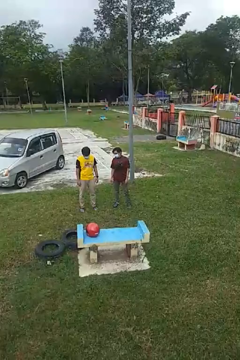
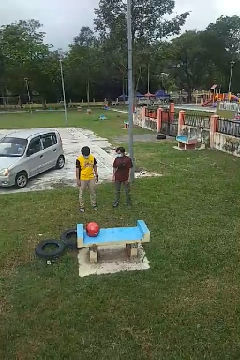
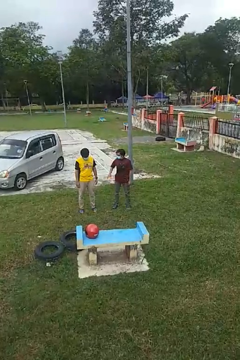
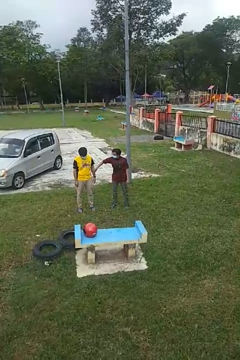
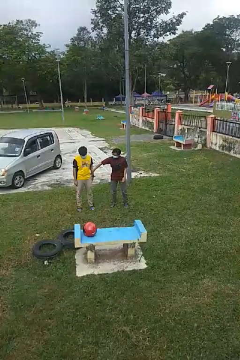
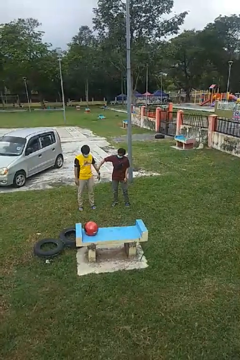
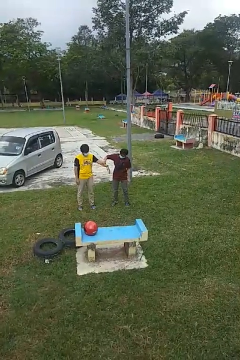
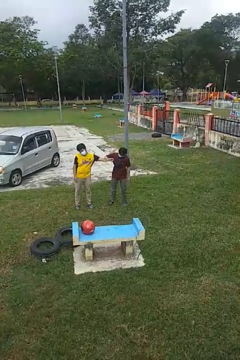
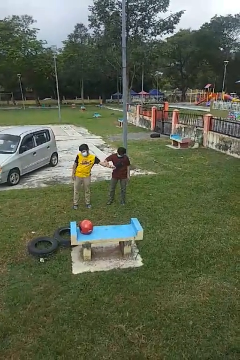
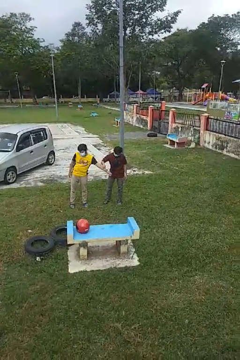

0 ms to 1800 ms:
person grabs person by forearm

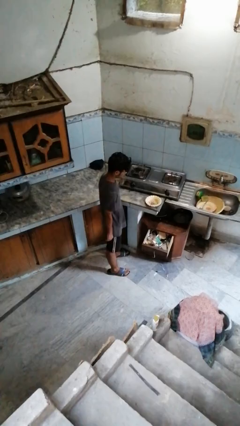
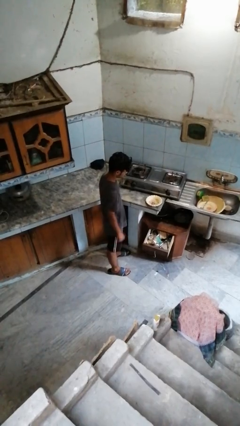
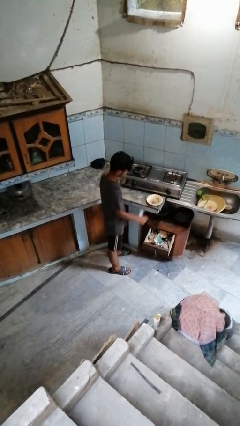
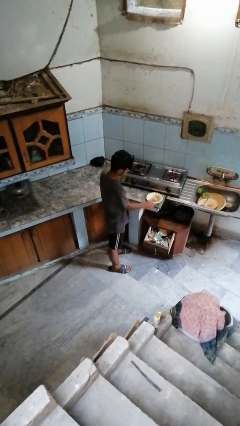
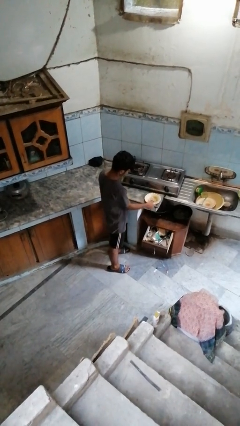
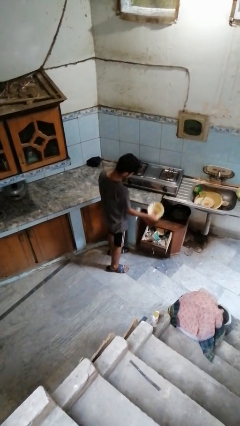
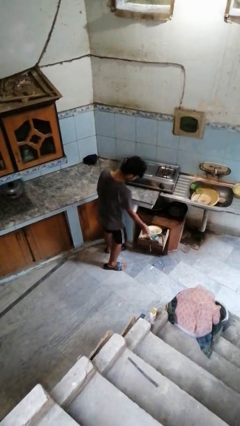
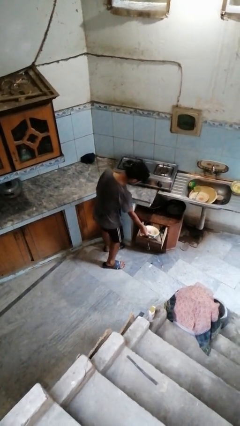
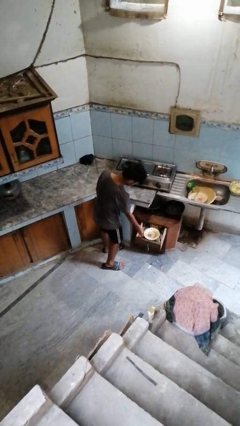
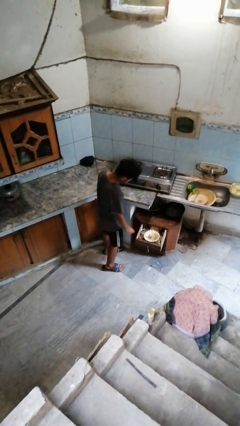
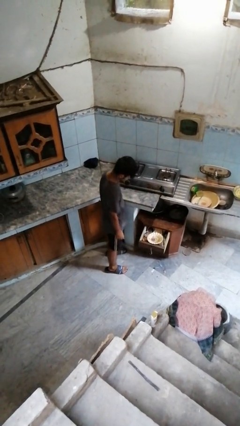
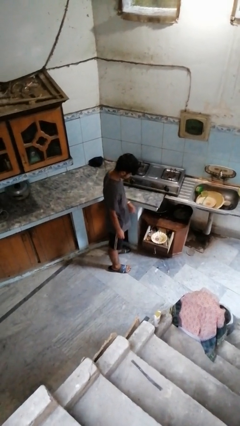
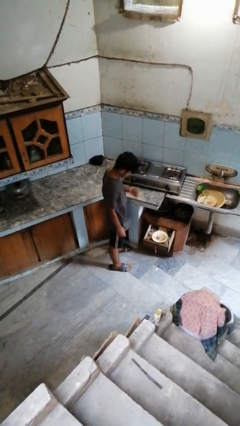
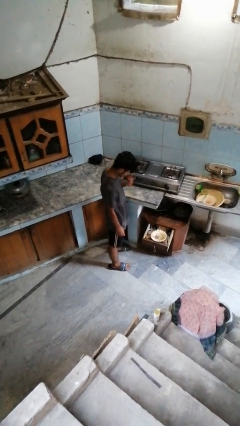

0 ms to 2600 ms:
person puts object into kitchen drawer

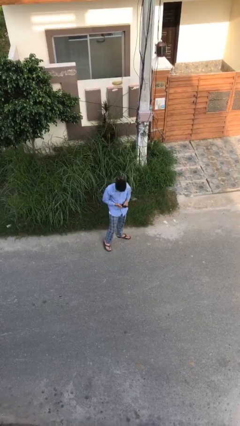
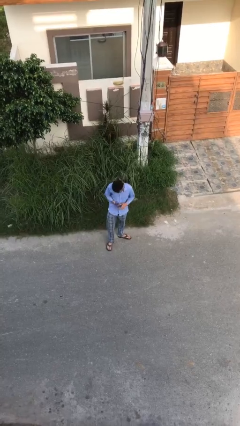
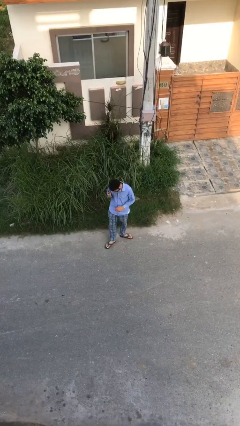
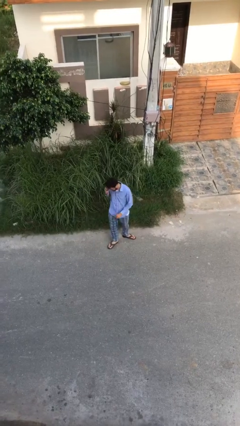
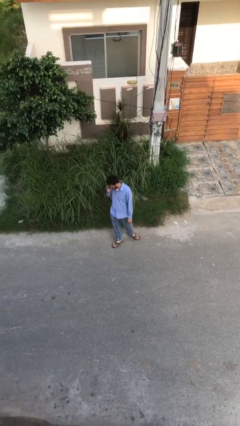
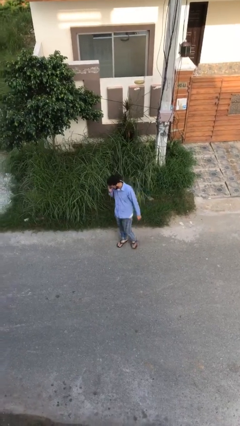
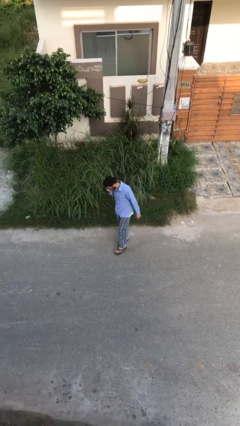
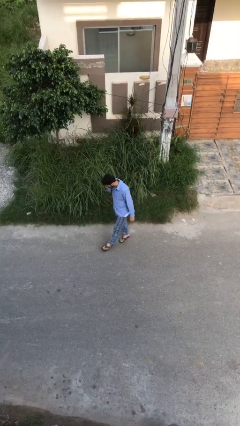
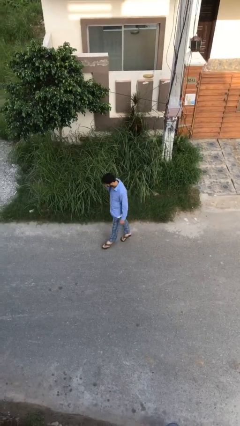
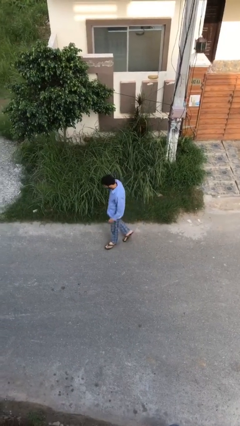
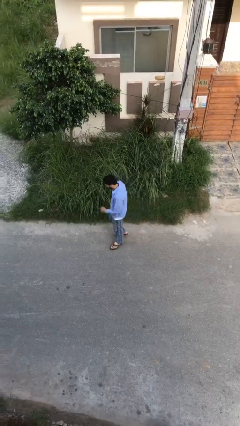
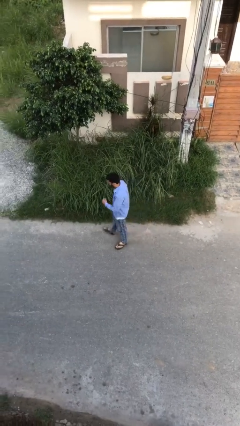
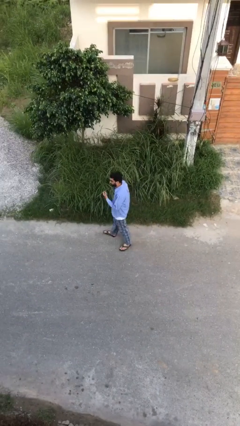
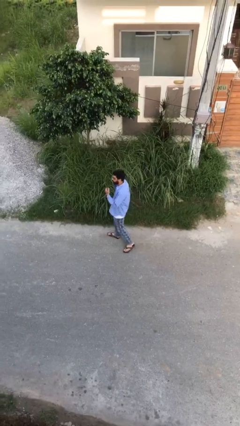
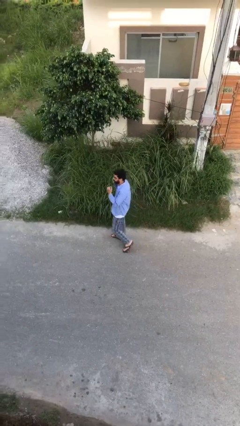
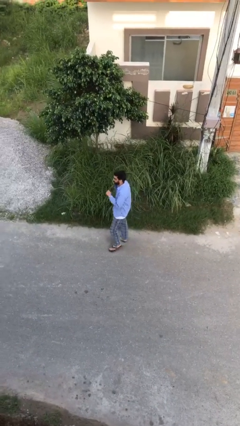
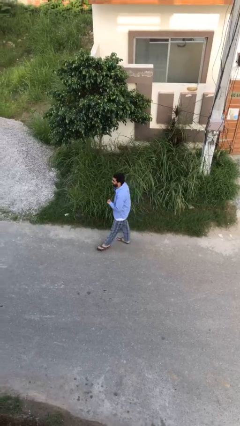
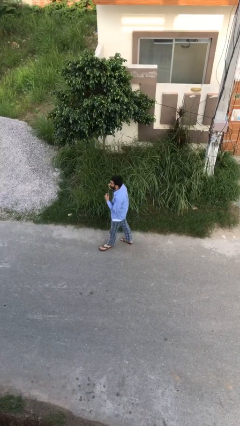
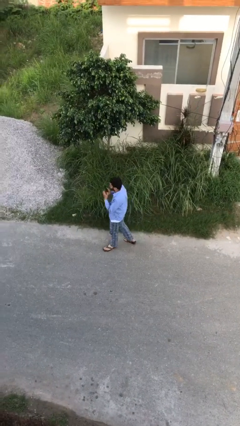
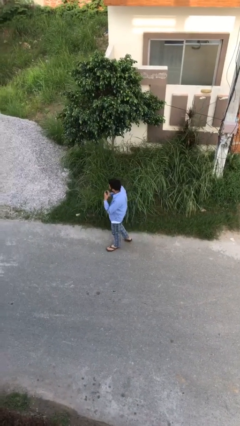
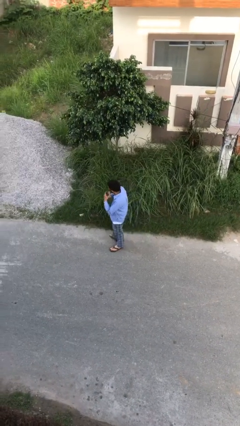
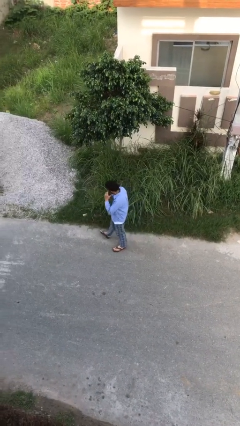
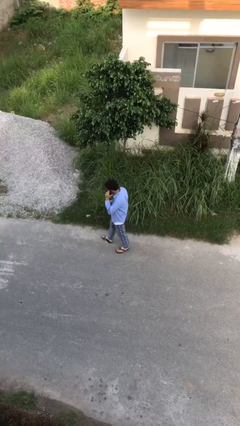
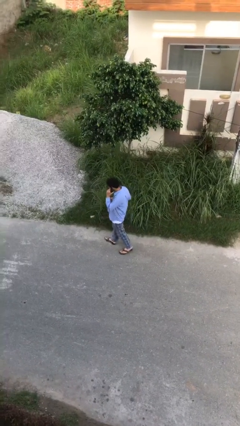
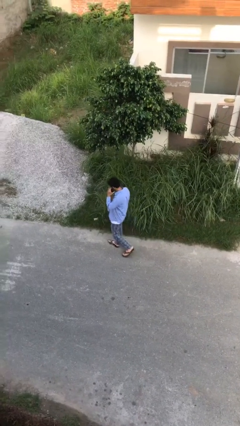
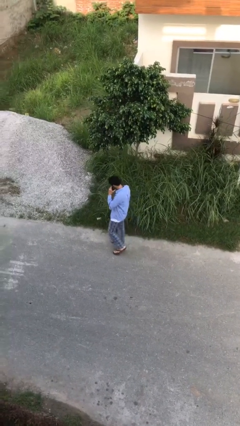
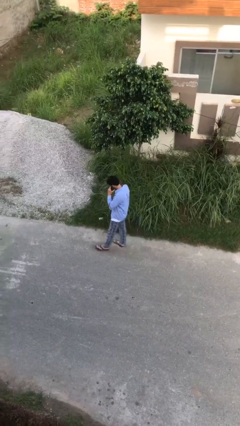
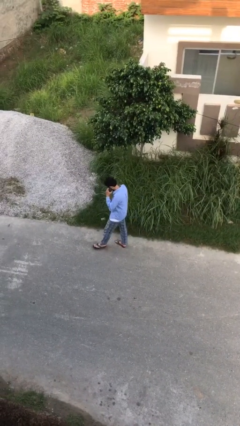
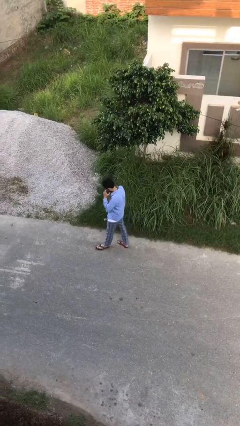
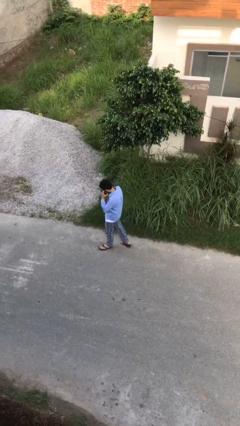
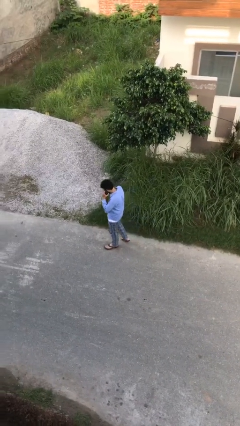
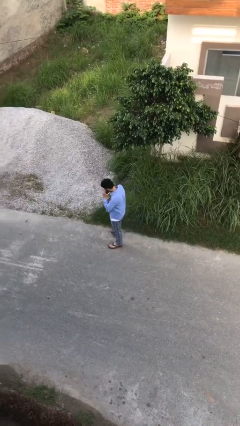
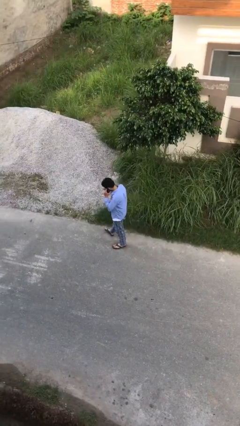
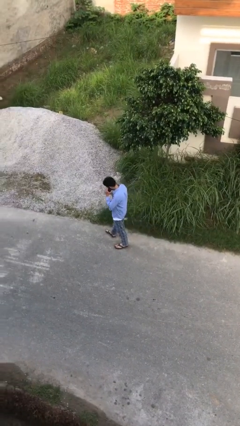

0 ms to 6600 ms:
person talks on phone

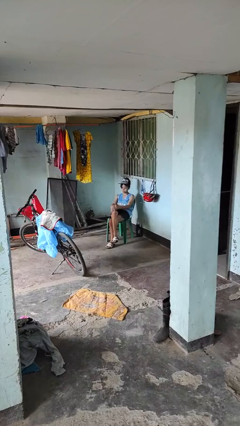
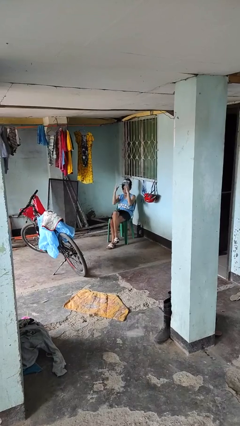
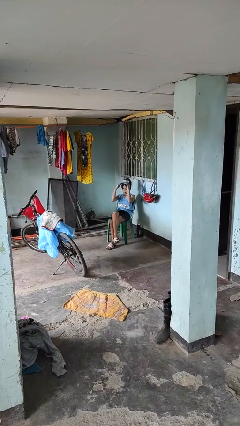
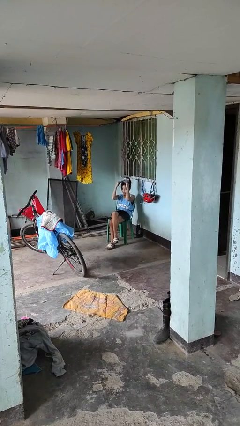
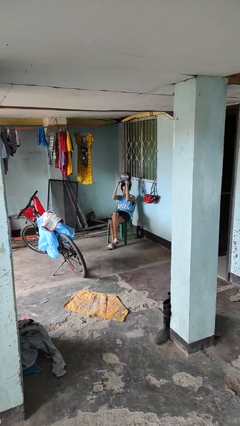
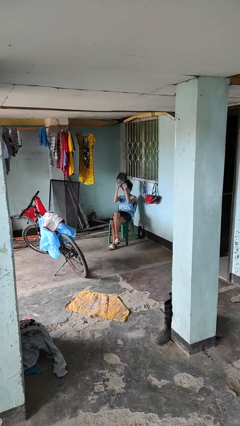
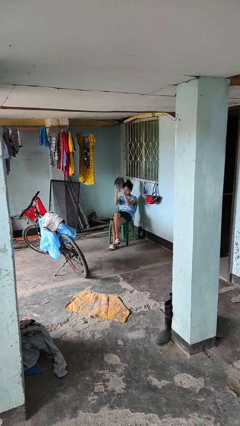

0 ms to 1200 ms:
person takes off hat

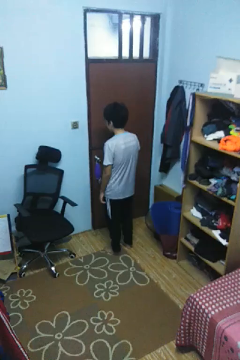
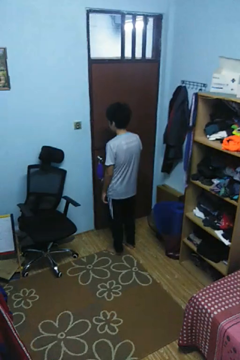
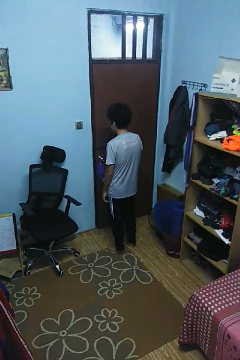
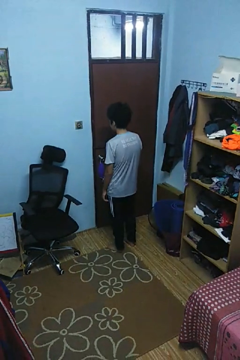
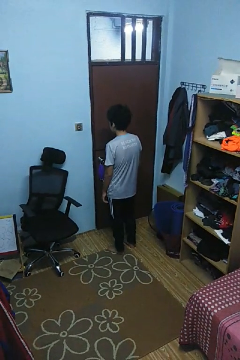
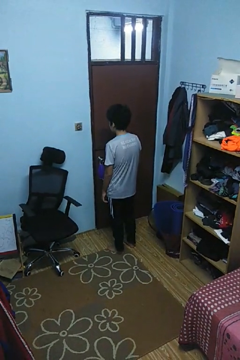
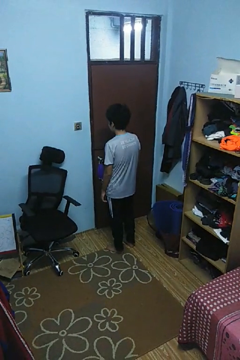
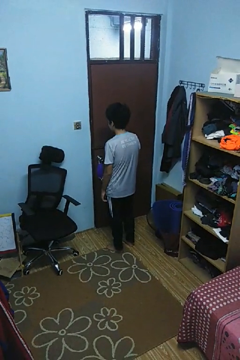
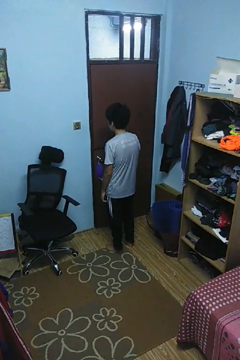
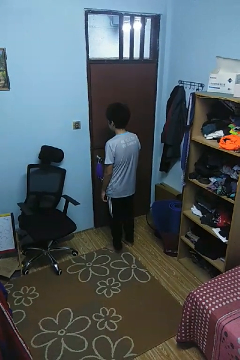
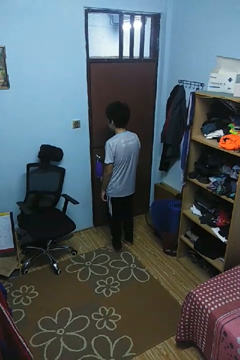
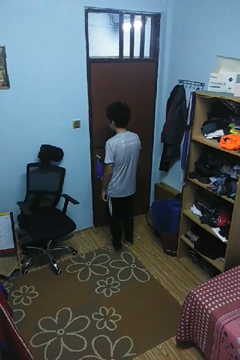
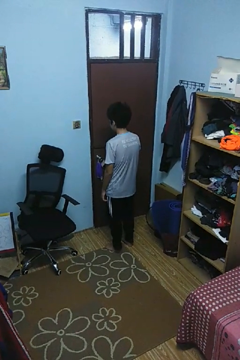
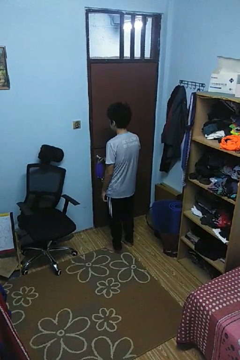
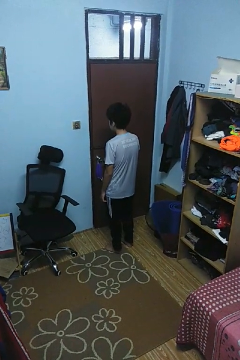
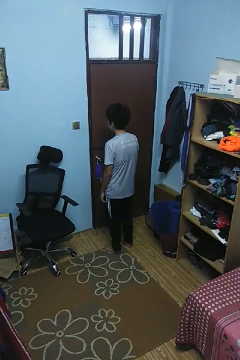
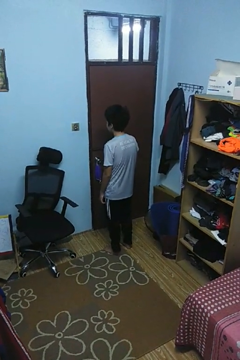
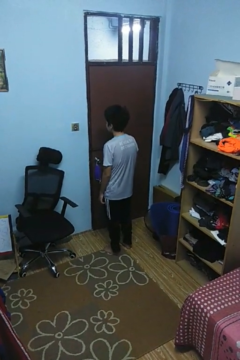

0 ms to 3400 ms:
person unlocks door with keys

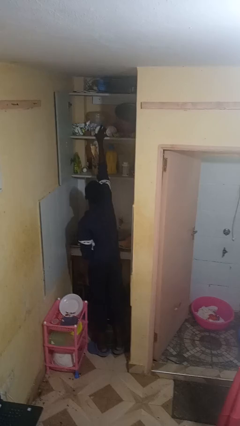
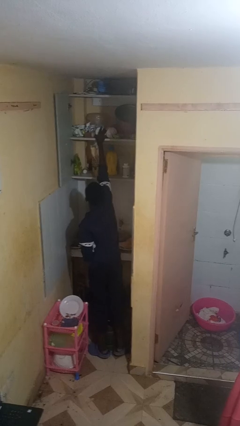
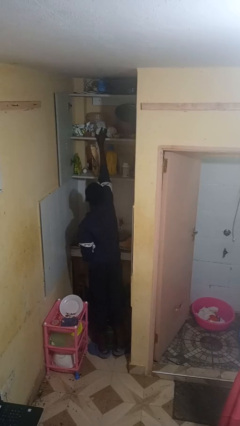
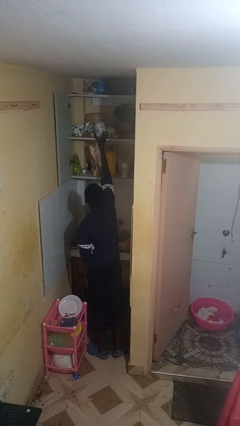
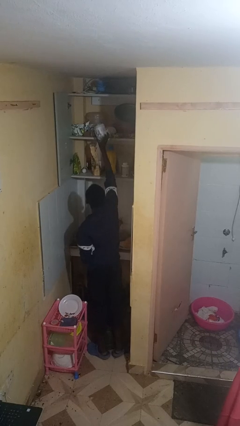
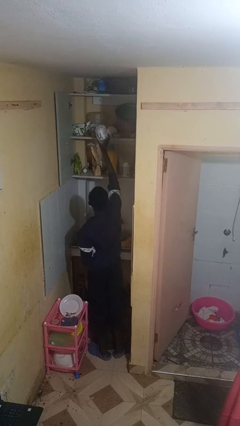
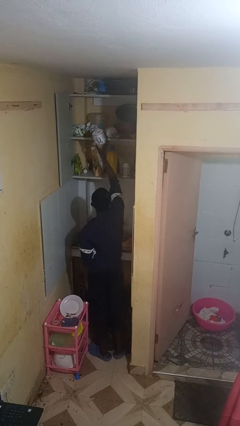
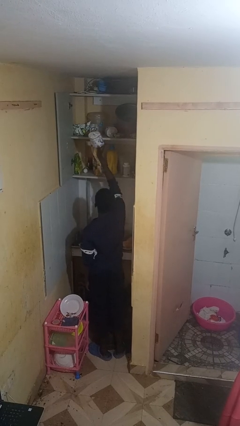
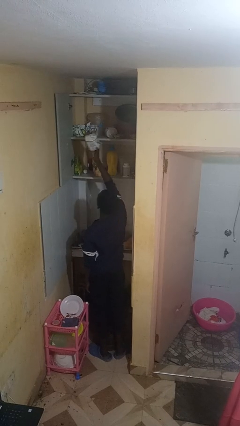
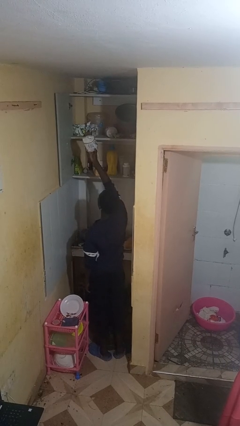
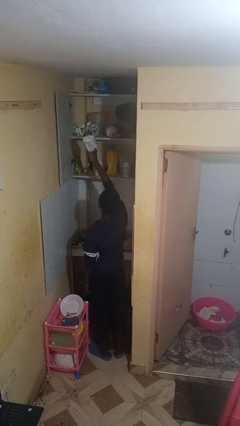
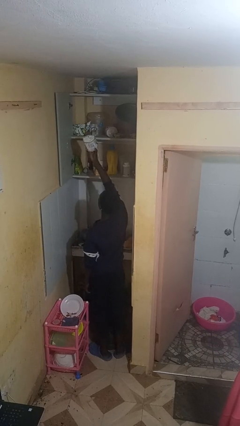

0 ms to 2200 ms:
person takes object from cabinet

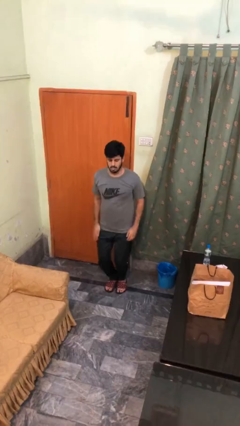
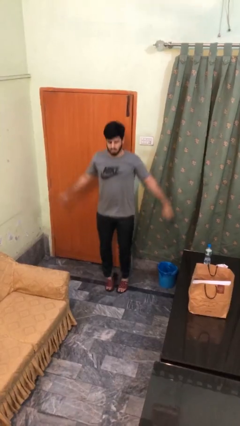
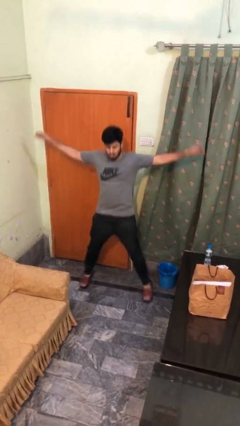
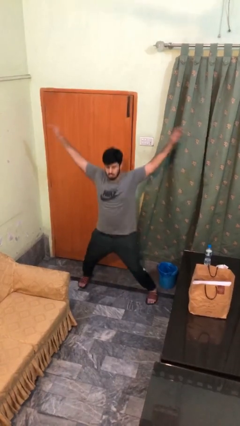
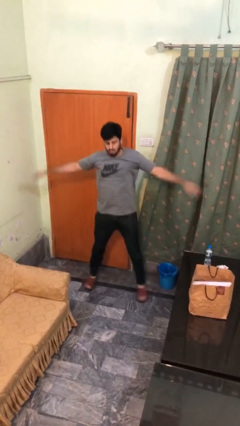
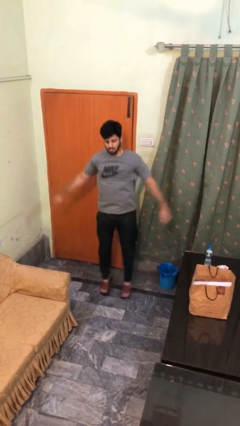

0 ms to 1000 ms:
person exercises with jumping jacks
